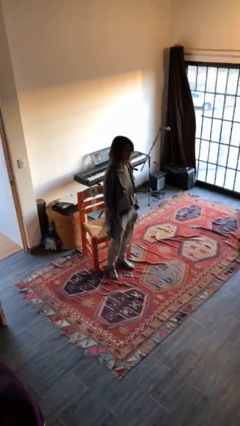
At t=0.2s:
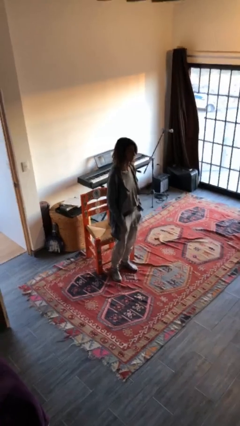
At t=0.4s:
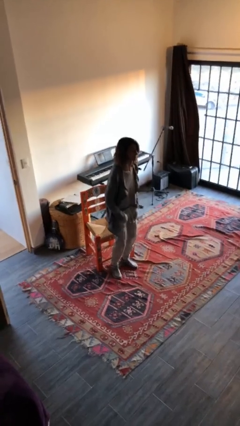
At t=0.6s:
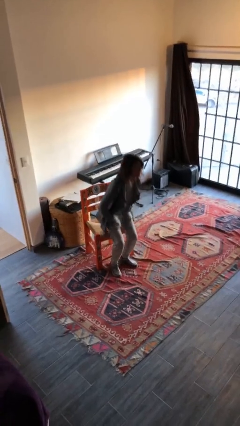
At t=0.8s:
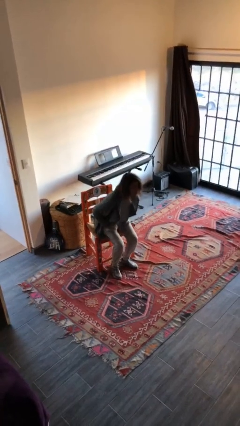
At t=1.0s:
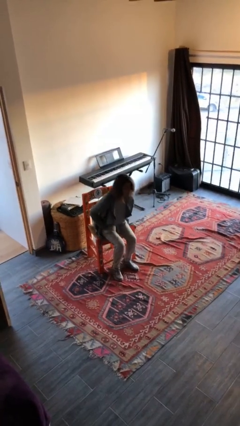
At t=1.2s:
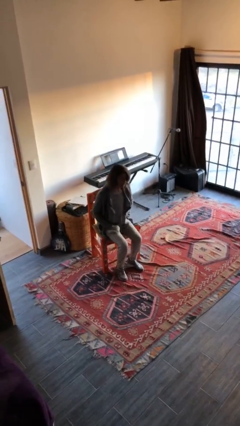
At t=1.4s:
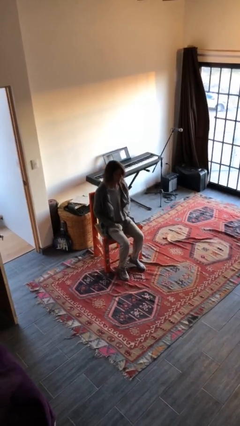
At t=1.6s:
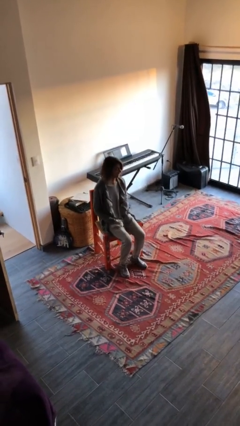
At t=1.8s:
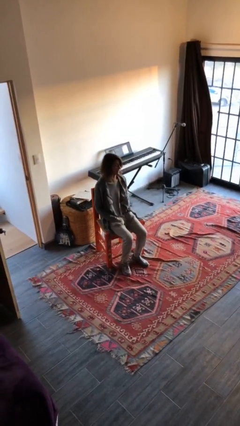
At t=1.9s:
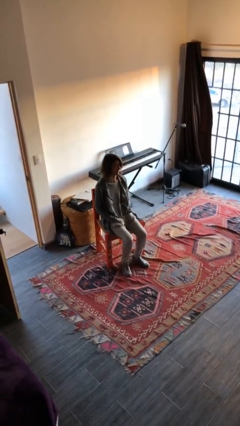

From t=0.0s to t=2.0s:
person sits down

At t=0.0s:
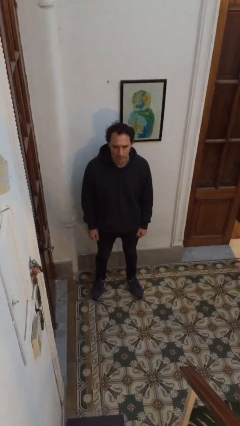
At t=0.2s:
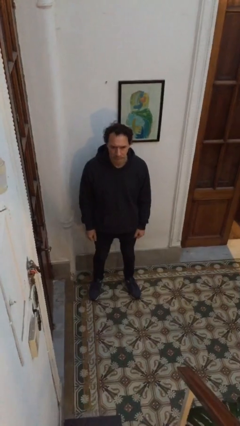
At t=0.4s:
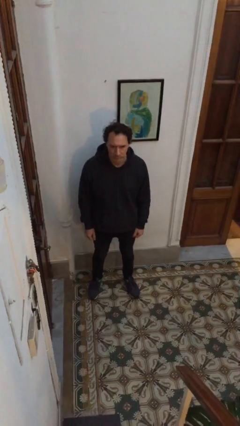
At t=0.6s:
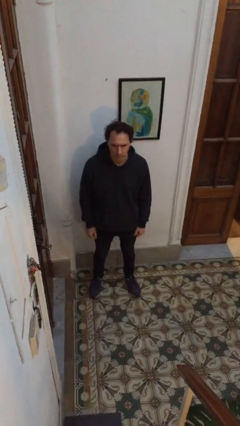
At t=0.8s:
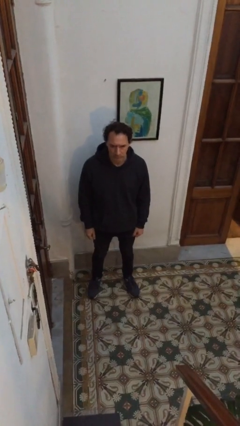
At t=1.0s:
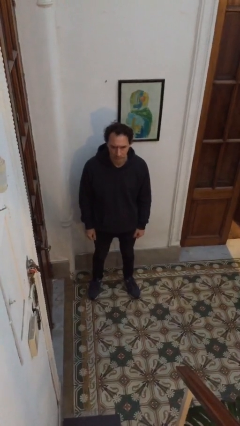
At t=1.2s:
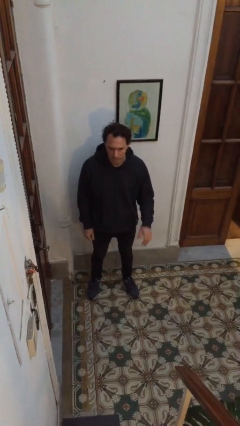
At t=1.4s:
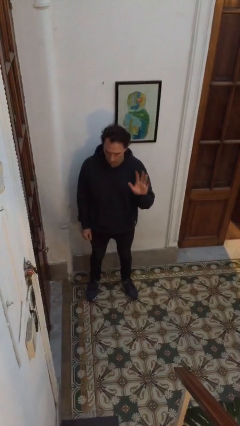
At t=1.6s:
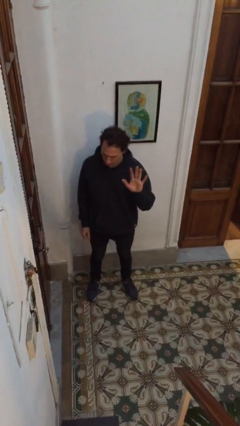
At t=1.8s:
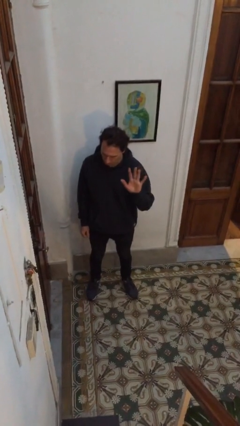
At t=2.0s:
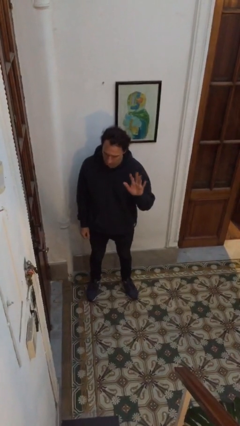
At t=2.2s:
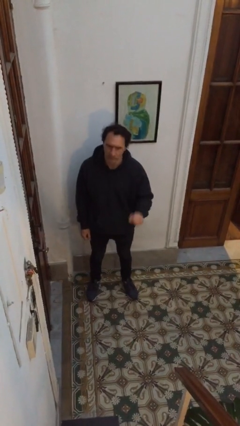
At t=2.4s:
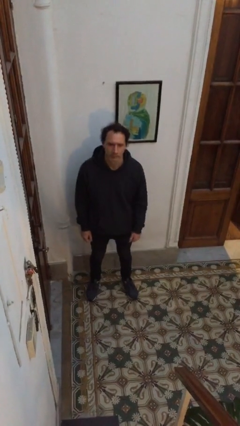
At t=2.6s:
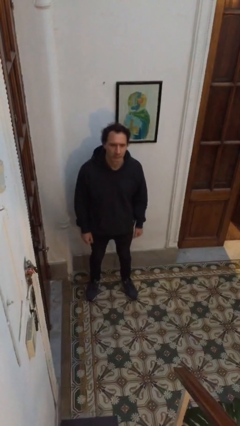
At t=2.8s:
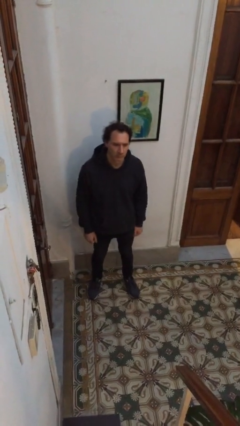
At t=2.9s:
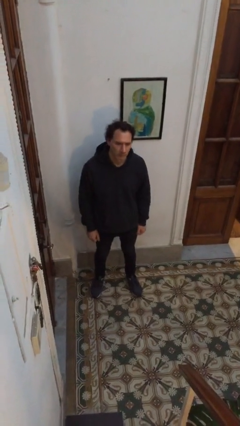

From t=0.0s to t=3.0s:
person gestures number five

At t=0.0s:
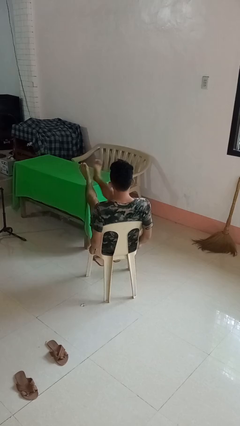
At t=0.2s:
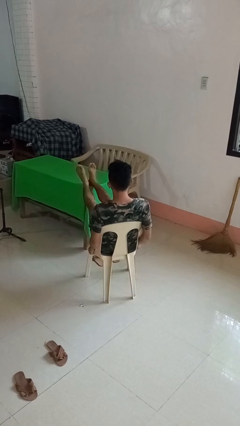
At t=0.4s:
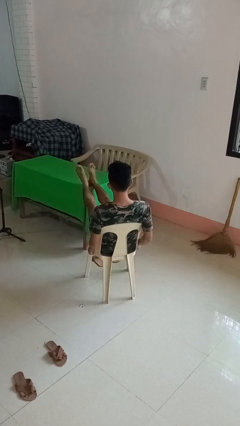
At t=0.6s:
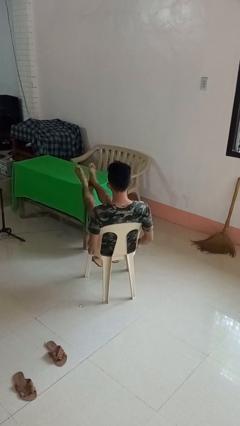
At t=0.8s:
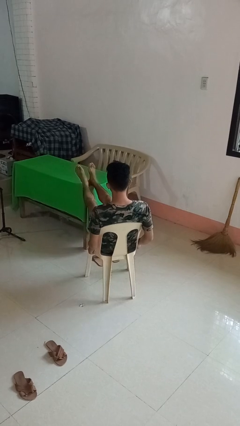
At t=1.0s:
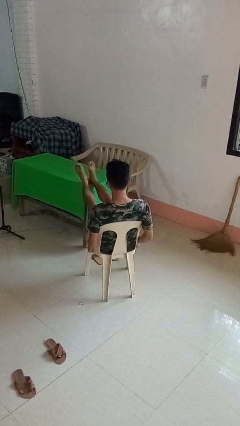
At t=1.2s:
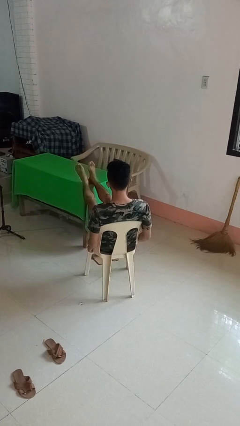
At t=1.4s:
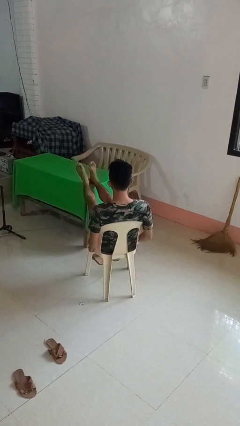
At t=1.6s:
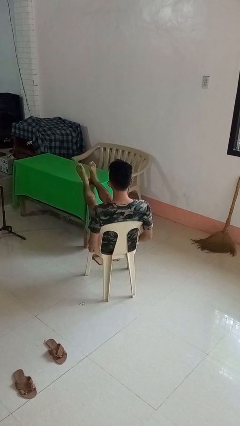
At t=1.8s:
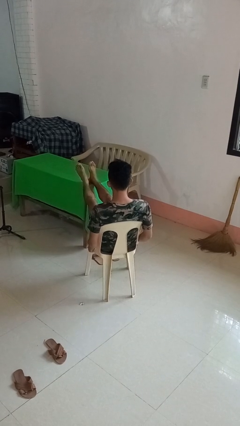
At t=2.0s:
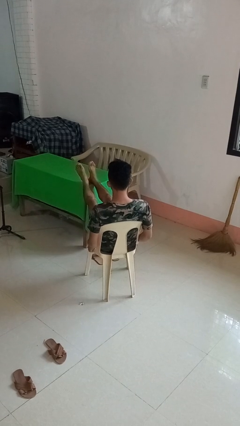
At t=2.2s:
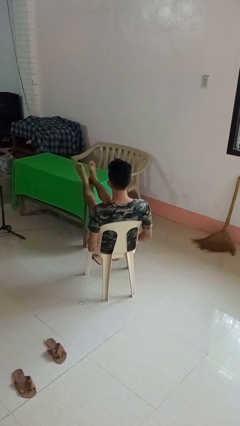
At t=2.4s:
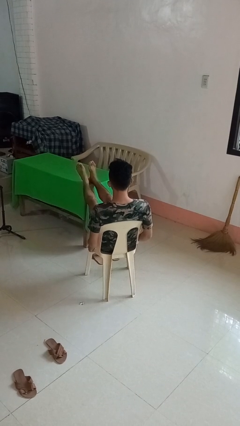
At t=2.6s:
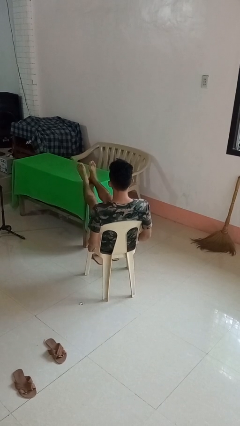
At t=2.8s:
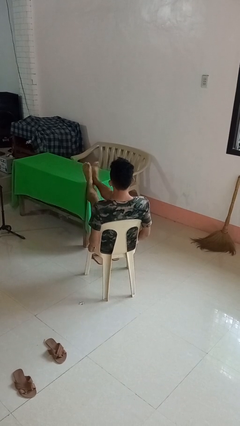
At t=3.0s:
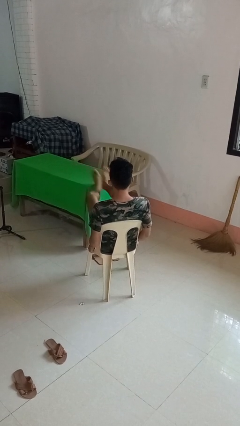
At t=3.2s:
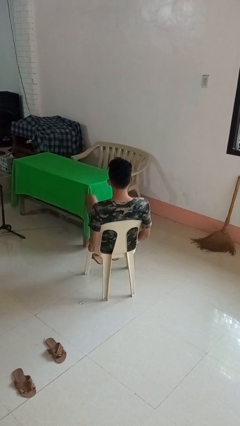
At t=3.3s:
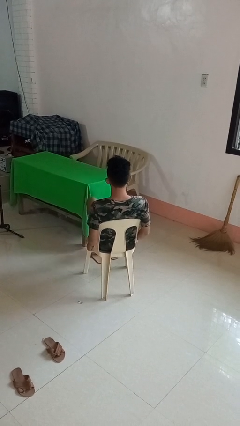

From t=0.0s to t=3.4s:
person puts feet up

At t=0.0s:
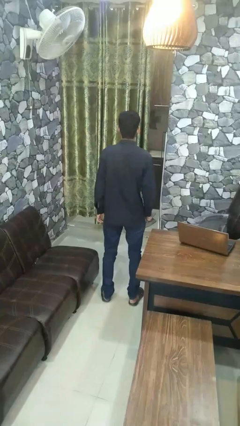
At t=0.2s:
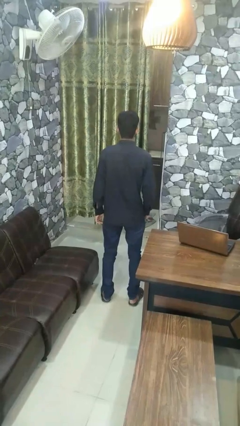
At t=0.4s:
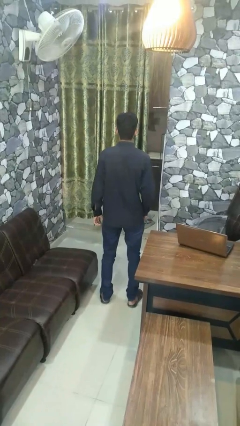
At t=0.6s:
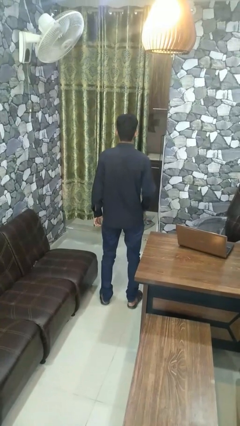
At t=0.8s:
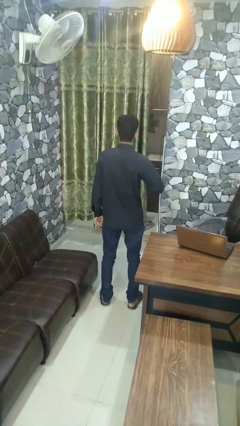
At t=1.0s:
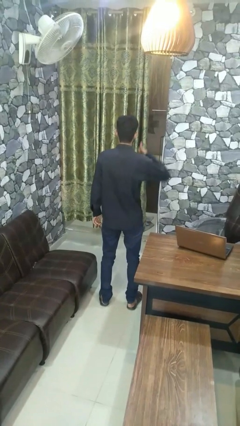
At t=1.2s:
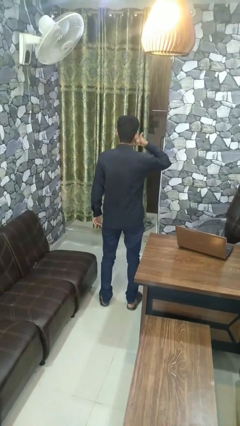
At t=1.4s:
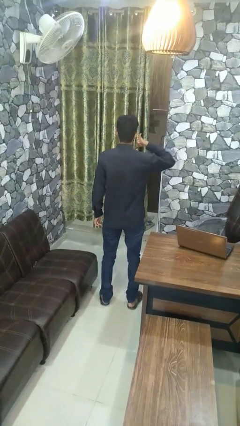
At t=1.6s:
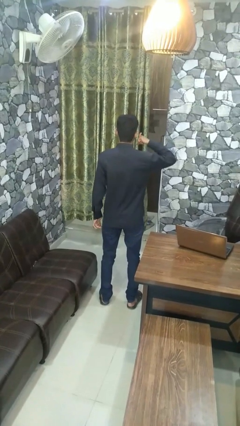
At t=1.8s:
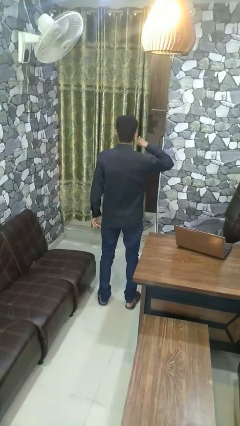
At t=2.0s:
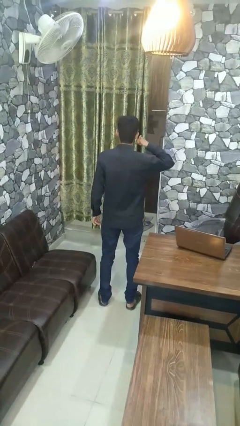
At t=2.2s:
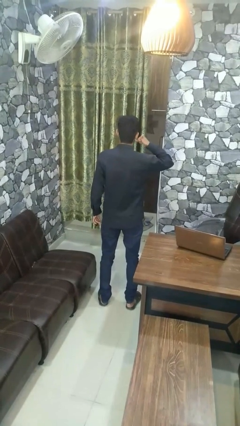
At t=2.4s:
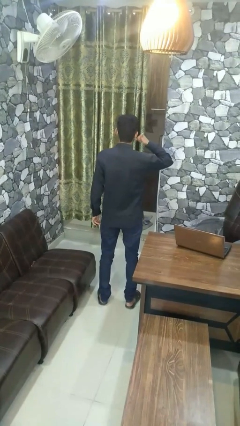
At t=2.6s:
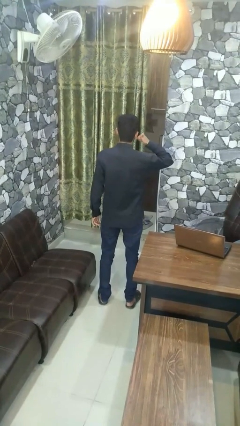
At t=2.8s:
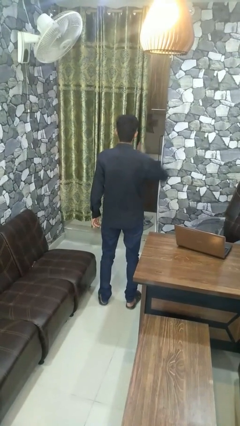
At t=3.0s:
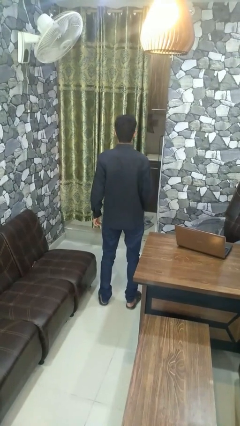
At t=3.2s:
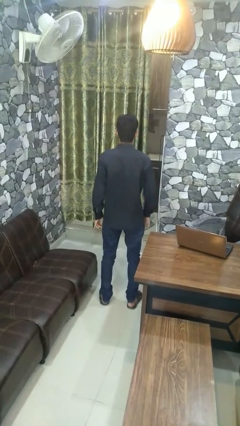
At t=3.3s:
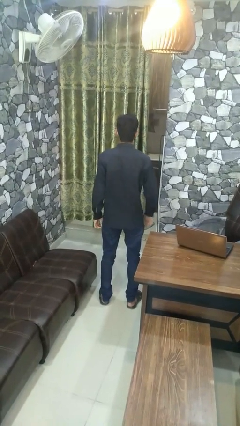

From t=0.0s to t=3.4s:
person gestures call me

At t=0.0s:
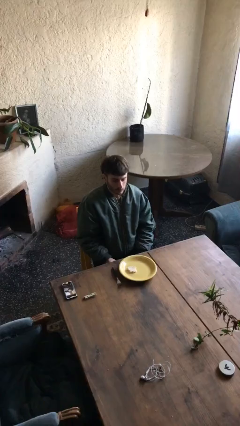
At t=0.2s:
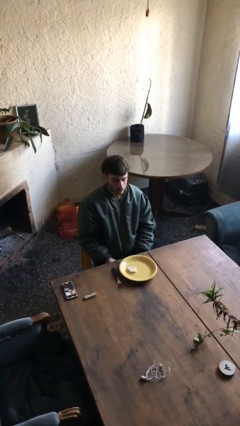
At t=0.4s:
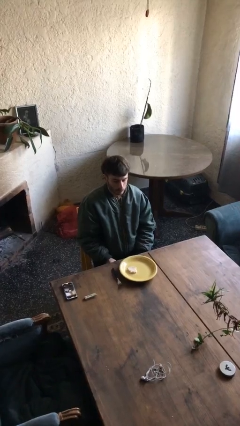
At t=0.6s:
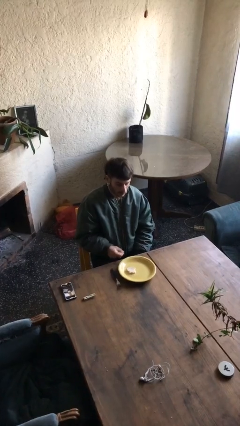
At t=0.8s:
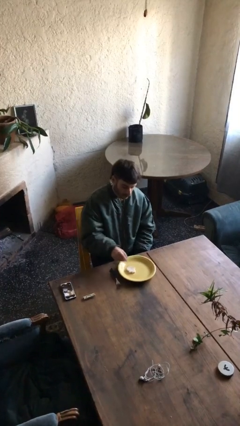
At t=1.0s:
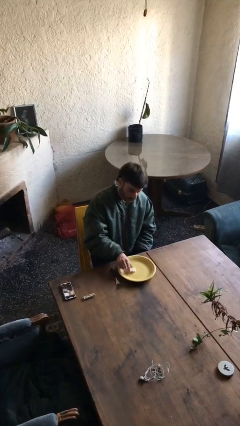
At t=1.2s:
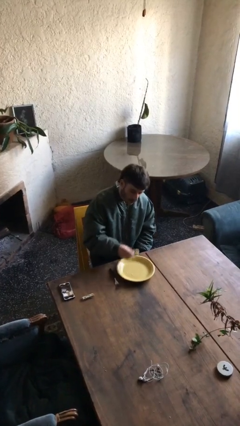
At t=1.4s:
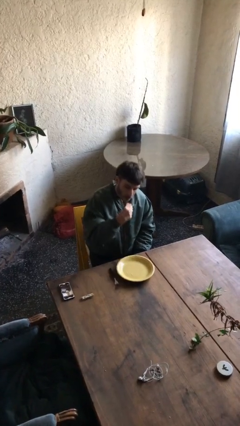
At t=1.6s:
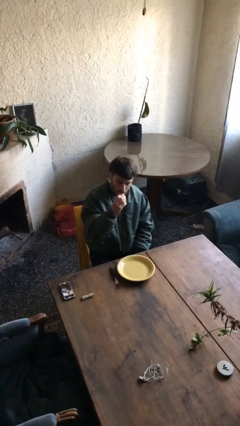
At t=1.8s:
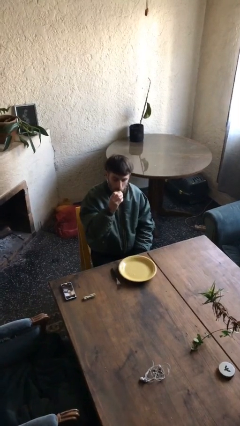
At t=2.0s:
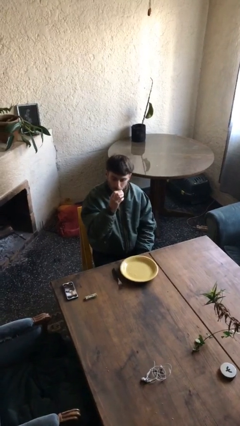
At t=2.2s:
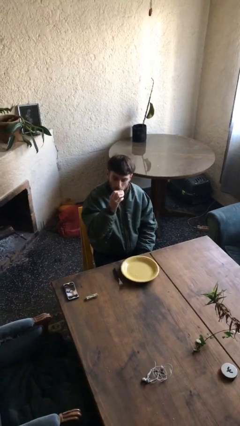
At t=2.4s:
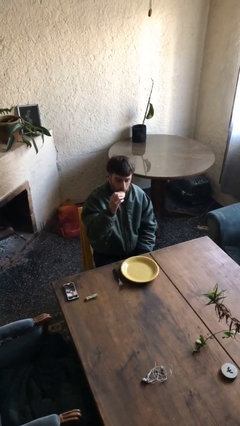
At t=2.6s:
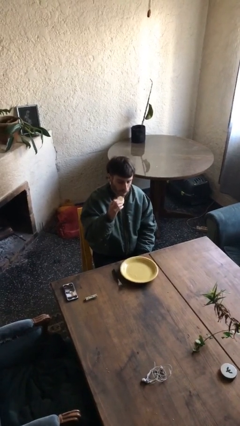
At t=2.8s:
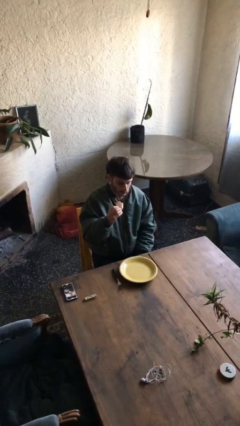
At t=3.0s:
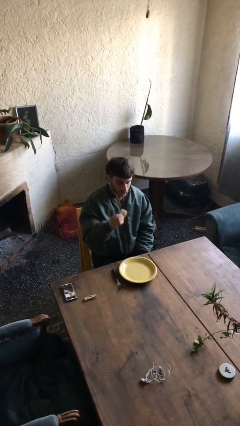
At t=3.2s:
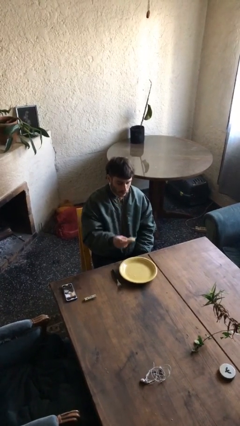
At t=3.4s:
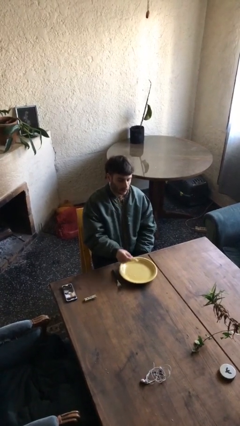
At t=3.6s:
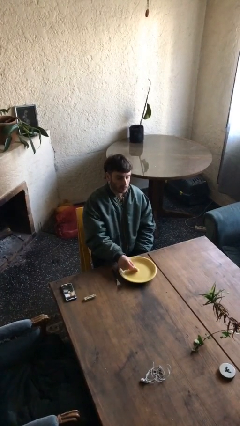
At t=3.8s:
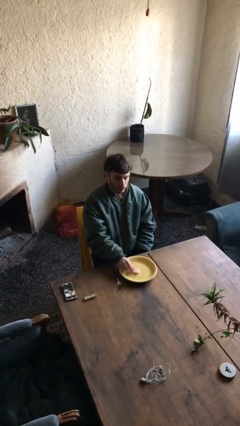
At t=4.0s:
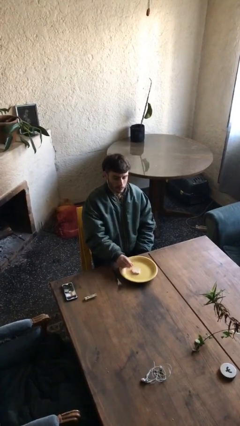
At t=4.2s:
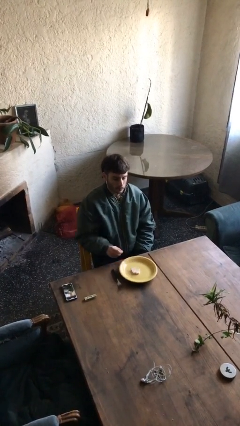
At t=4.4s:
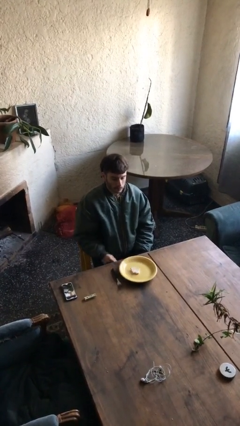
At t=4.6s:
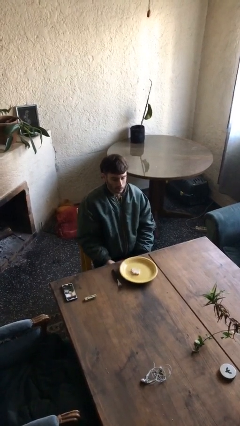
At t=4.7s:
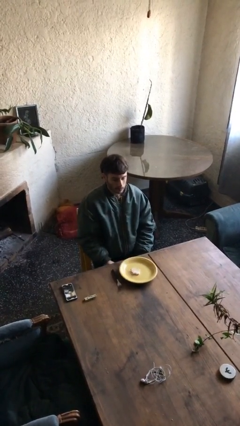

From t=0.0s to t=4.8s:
person eats with hands

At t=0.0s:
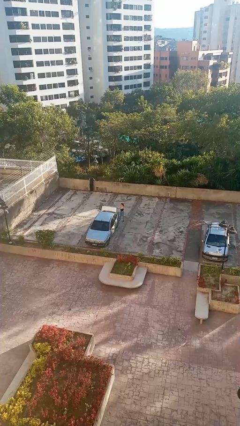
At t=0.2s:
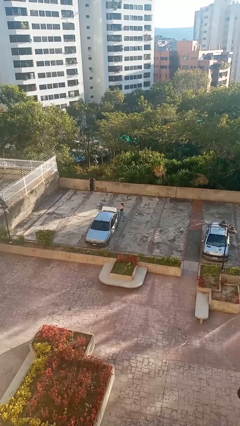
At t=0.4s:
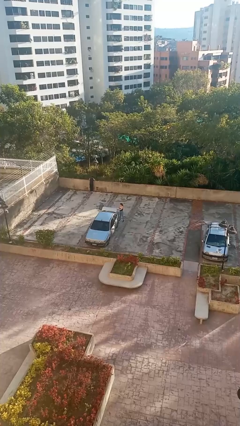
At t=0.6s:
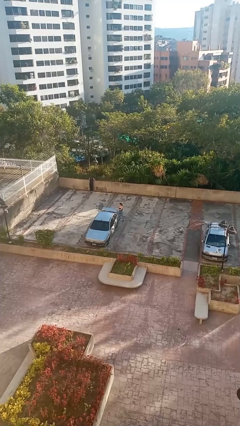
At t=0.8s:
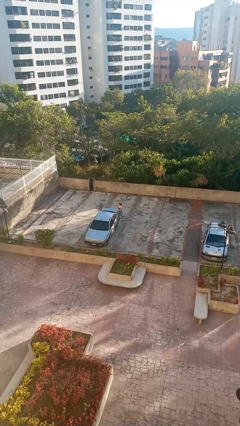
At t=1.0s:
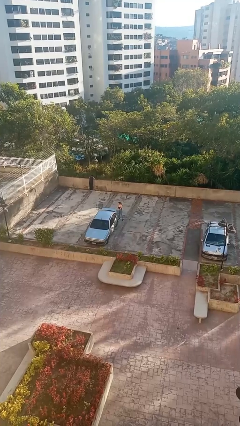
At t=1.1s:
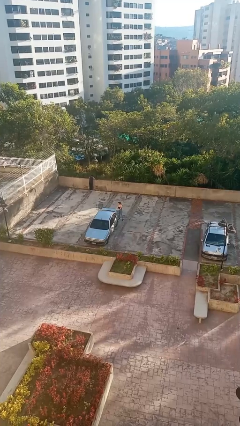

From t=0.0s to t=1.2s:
person closes car trunk
